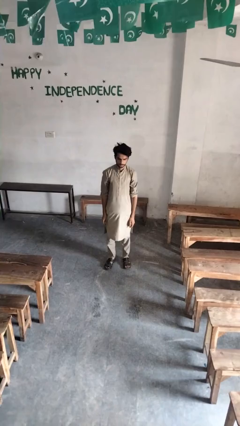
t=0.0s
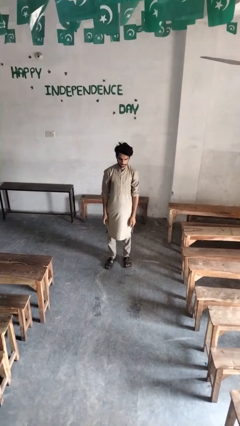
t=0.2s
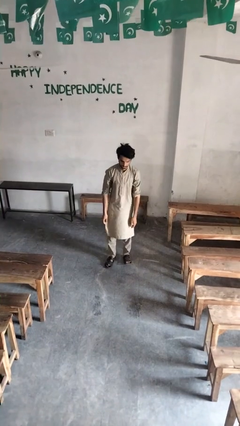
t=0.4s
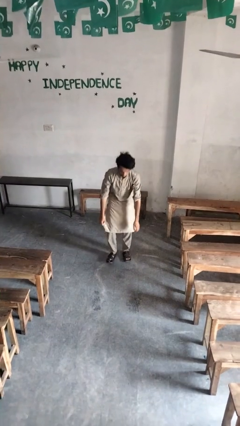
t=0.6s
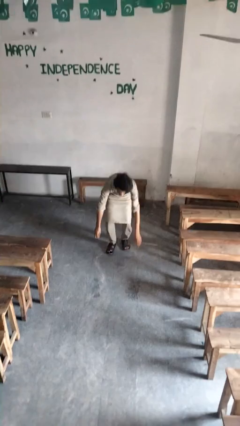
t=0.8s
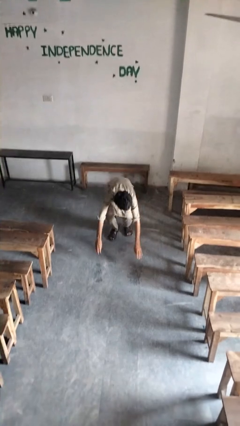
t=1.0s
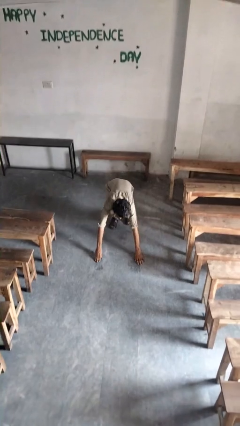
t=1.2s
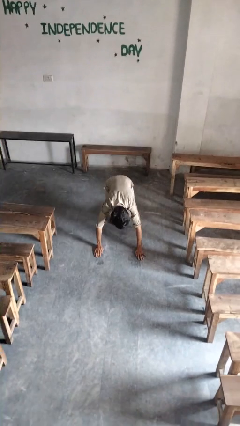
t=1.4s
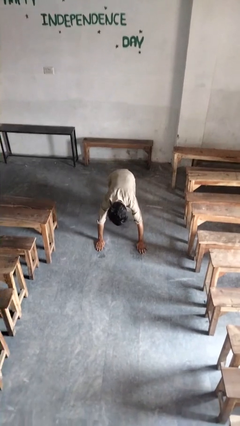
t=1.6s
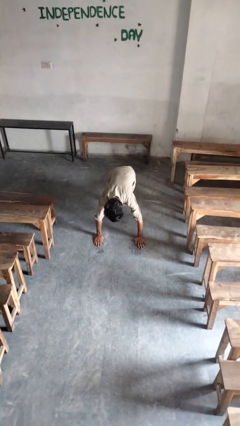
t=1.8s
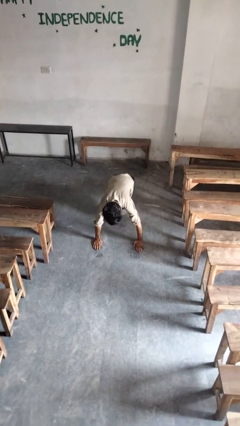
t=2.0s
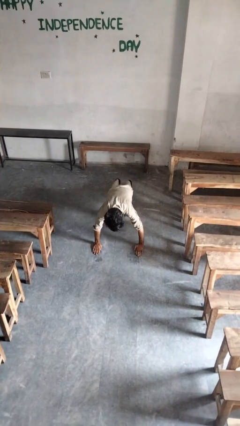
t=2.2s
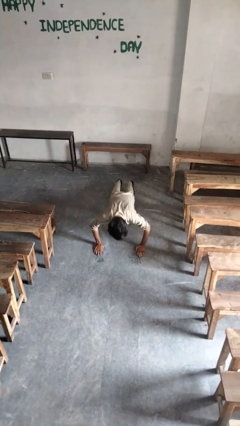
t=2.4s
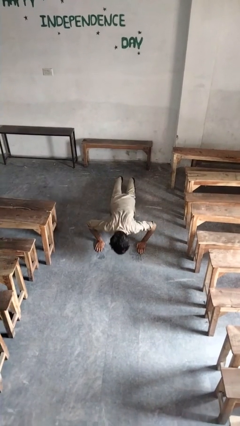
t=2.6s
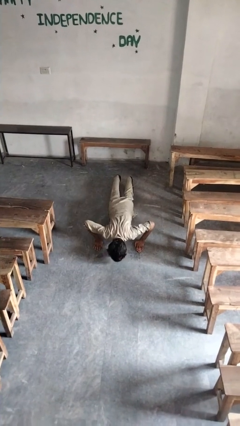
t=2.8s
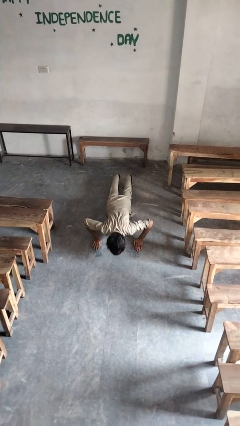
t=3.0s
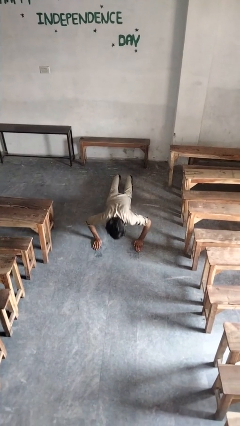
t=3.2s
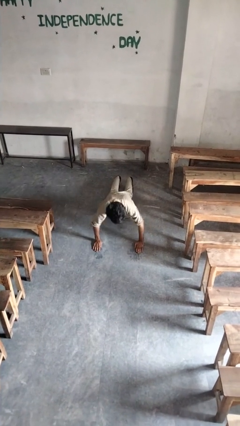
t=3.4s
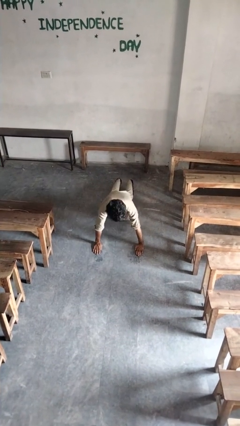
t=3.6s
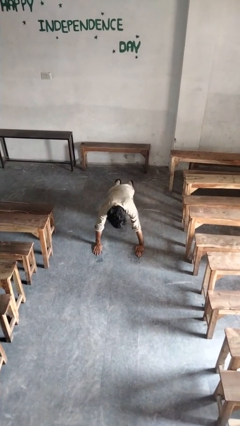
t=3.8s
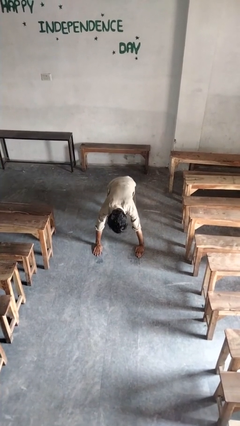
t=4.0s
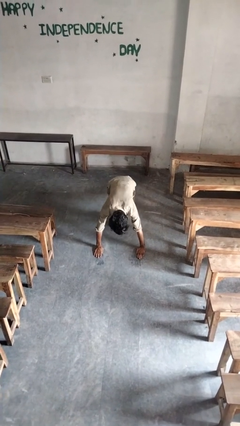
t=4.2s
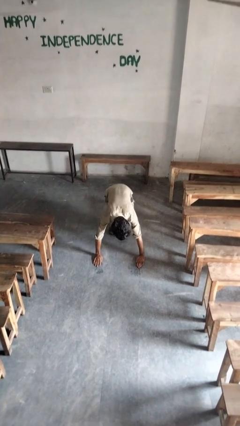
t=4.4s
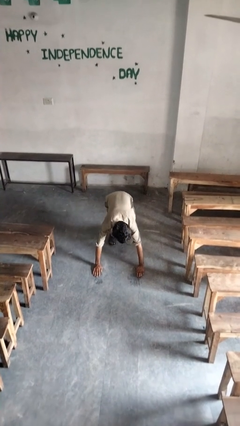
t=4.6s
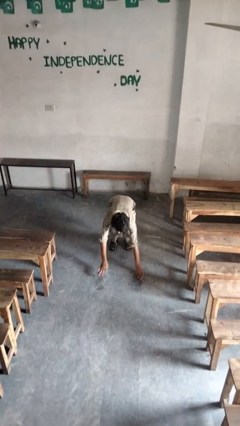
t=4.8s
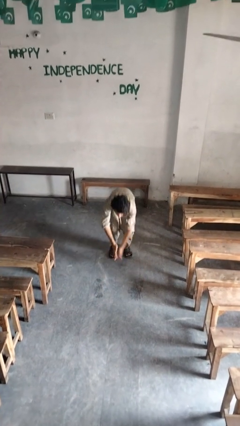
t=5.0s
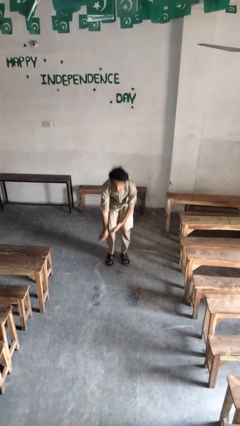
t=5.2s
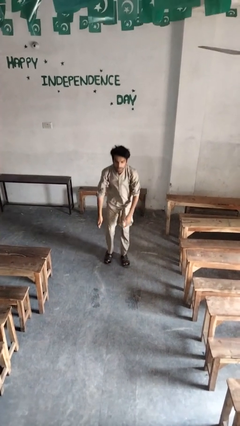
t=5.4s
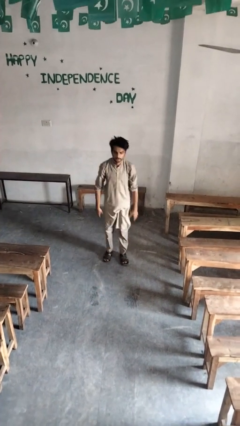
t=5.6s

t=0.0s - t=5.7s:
person exercises with pushup

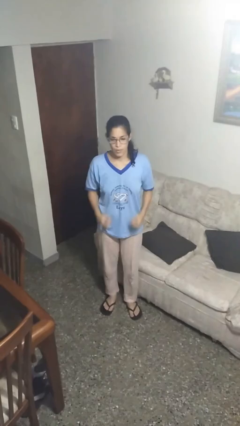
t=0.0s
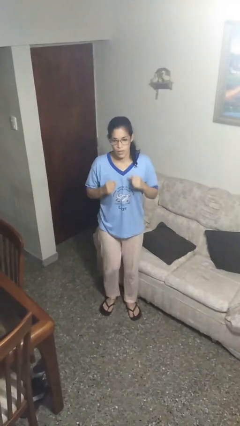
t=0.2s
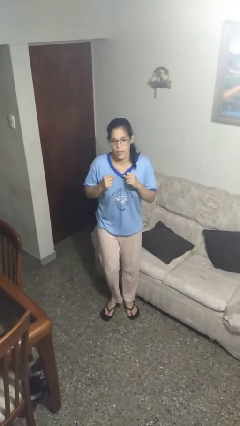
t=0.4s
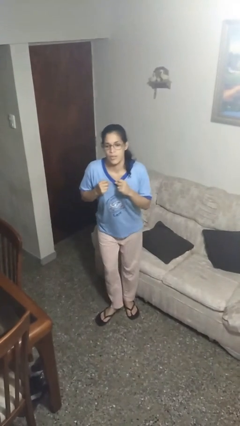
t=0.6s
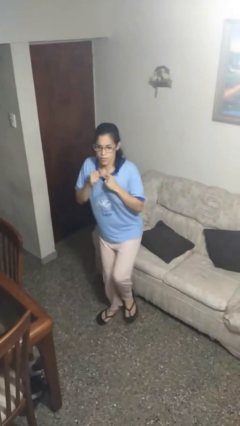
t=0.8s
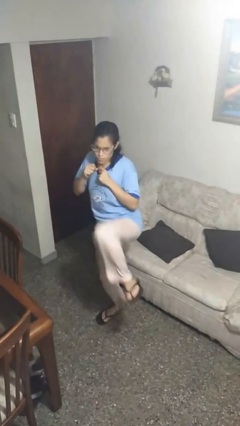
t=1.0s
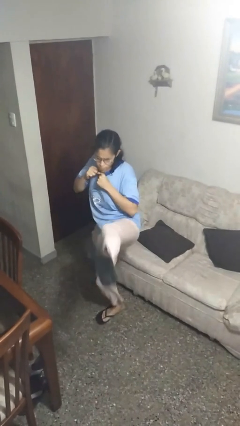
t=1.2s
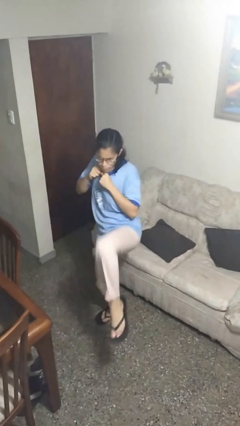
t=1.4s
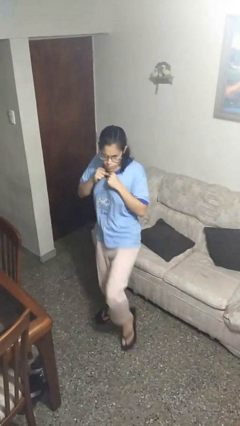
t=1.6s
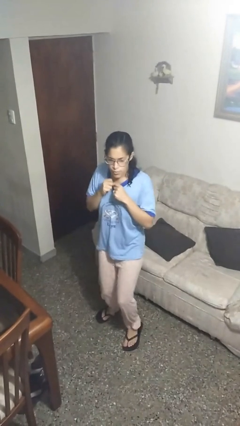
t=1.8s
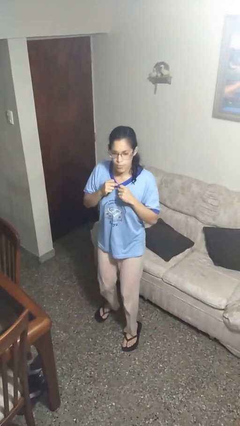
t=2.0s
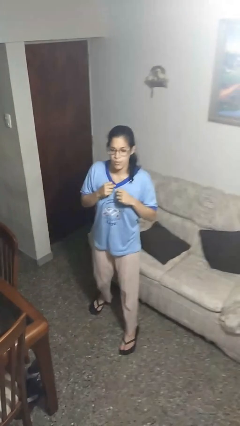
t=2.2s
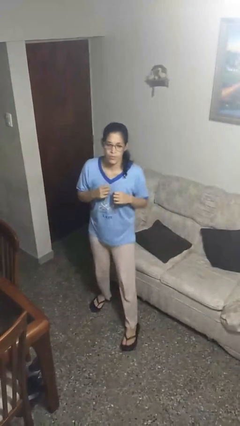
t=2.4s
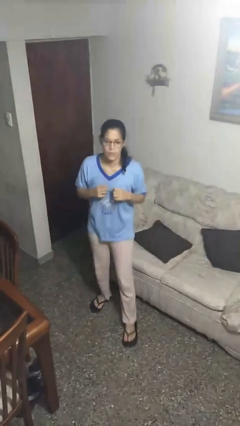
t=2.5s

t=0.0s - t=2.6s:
person karate kicks

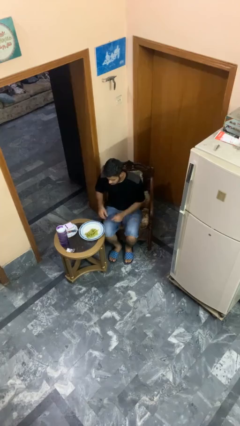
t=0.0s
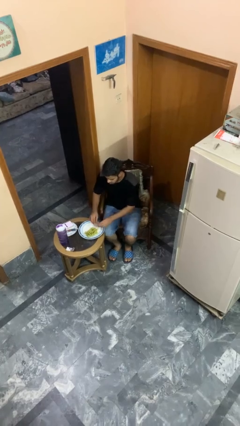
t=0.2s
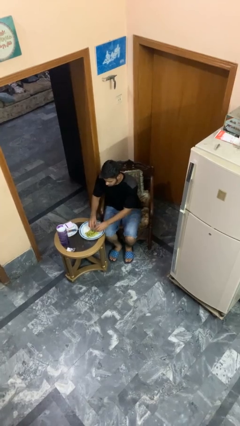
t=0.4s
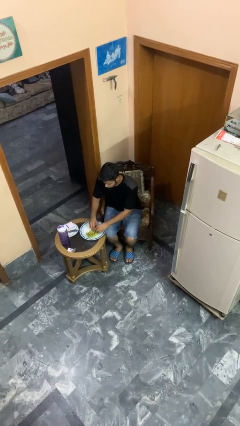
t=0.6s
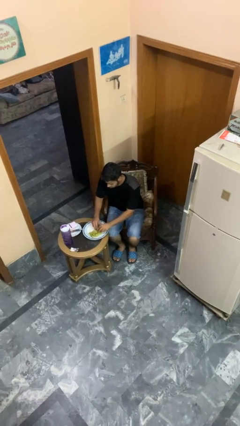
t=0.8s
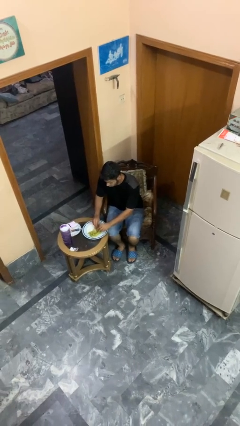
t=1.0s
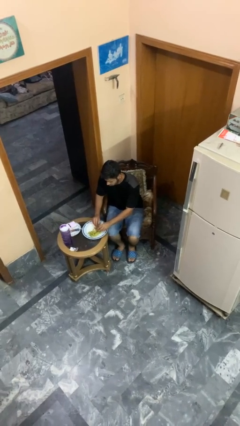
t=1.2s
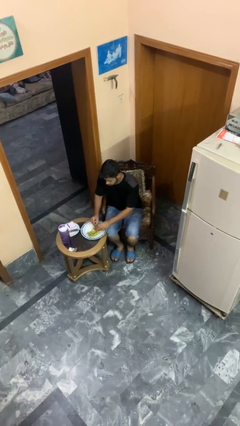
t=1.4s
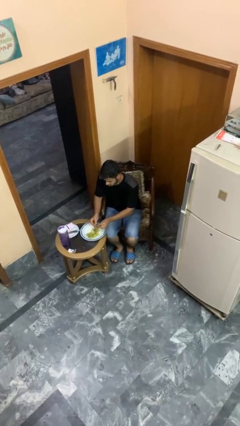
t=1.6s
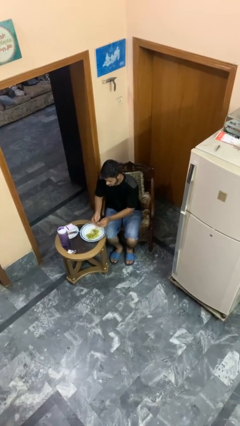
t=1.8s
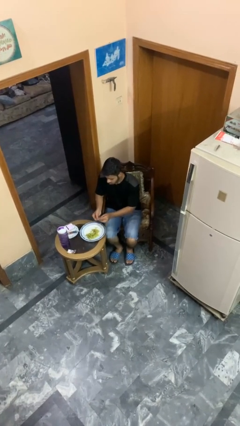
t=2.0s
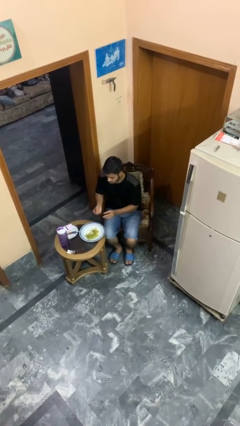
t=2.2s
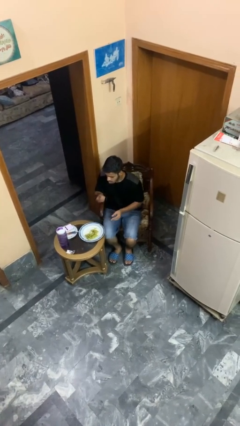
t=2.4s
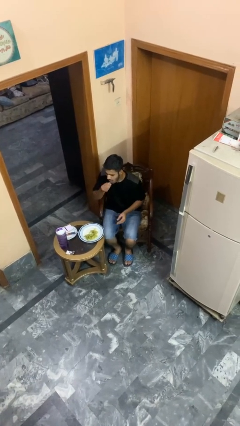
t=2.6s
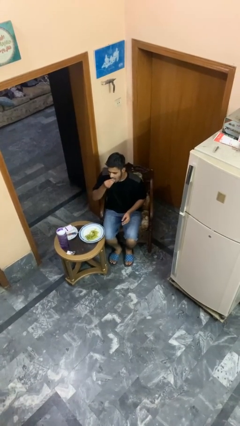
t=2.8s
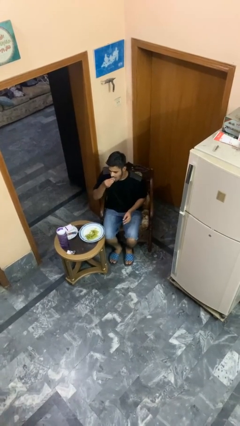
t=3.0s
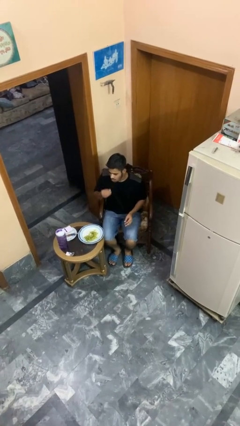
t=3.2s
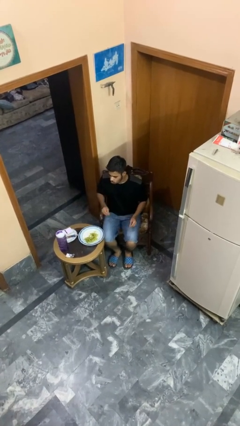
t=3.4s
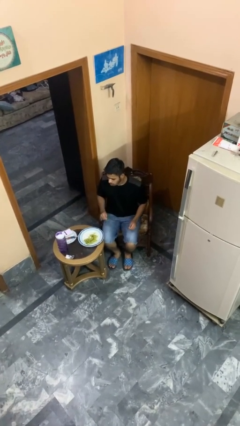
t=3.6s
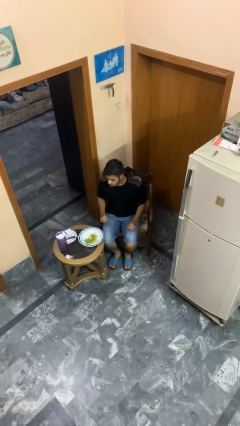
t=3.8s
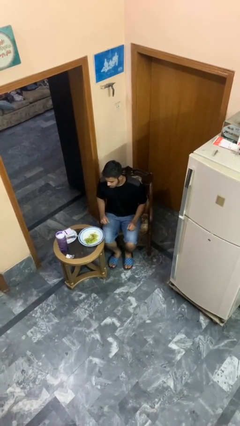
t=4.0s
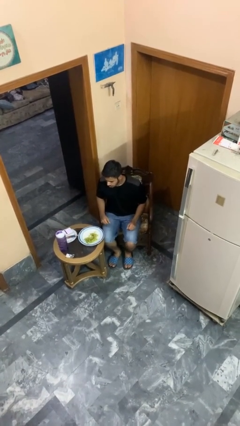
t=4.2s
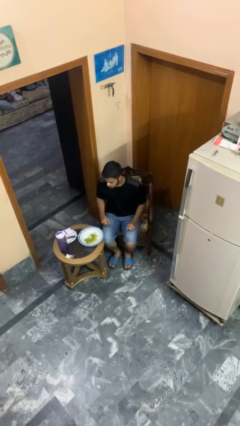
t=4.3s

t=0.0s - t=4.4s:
person eats with hands

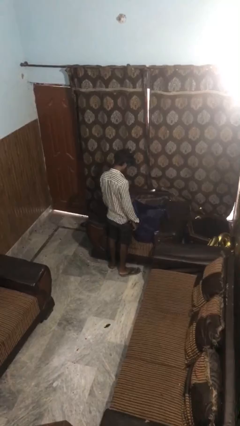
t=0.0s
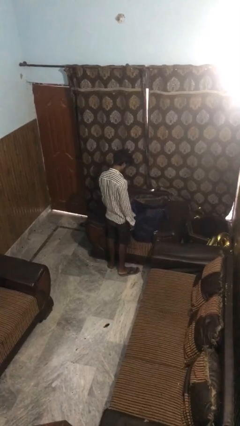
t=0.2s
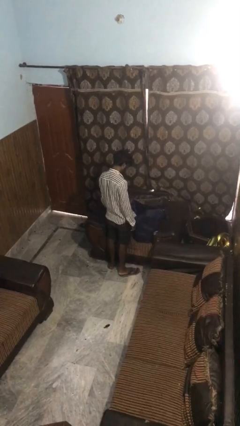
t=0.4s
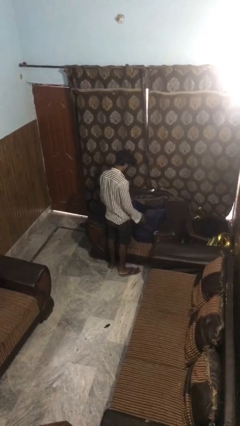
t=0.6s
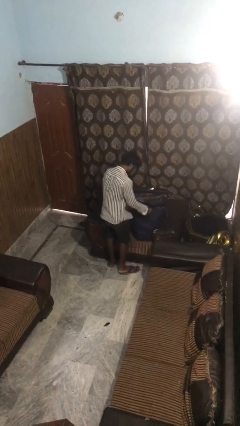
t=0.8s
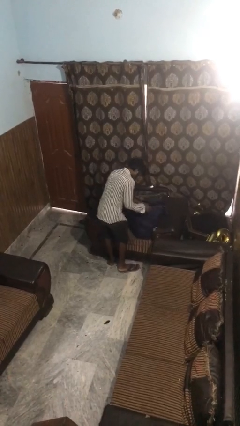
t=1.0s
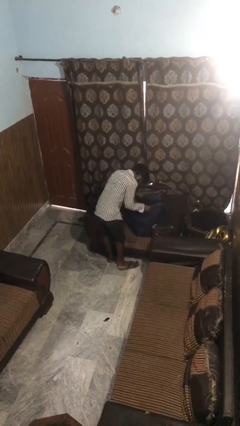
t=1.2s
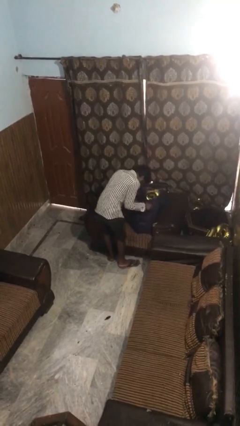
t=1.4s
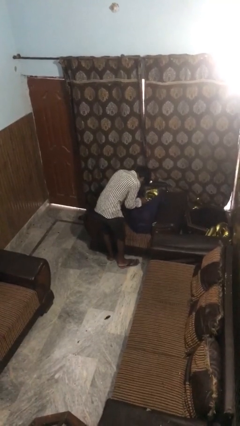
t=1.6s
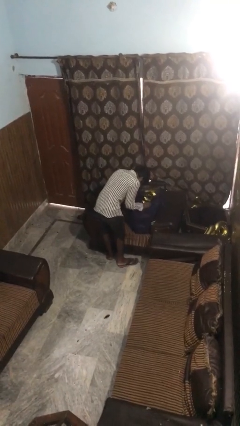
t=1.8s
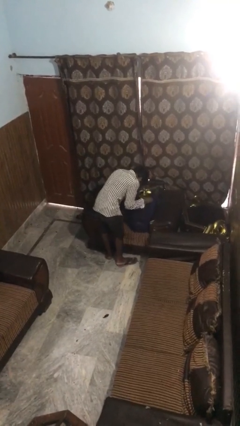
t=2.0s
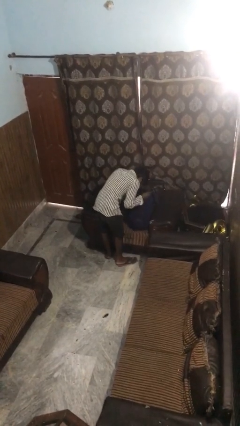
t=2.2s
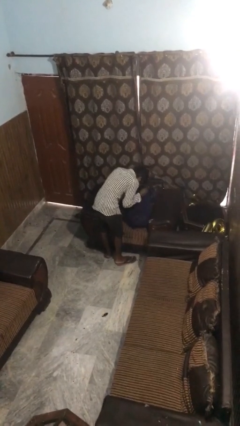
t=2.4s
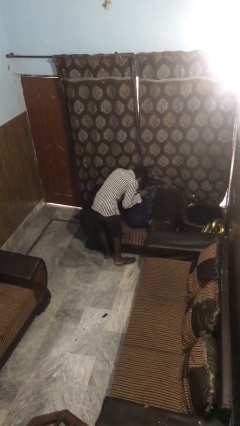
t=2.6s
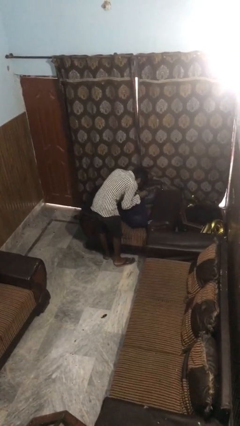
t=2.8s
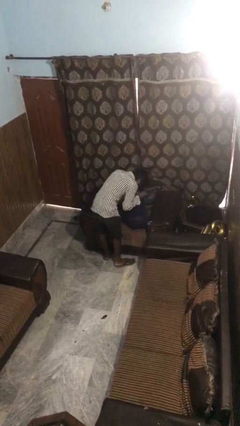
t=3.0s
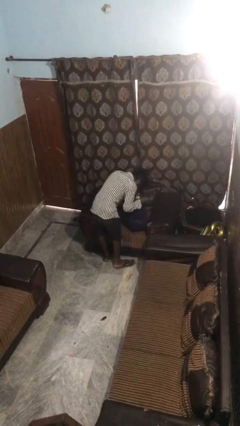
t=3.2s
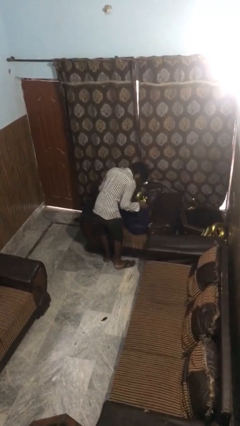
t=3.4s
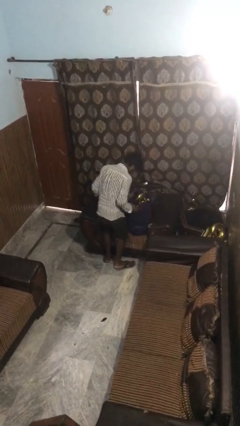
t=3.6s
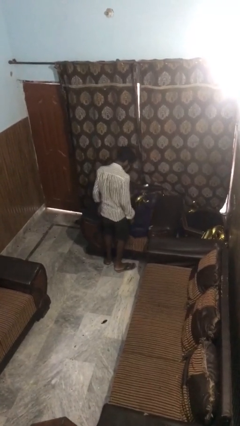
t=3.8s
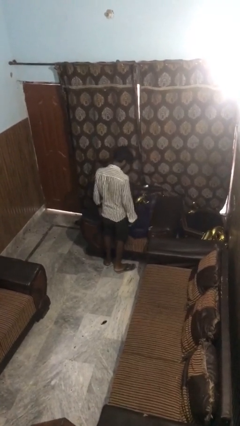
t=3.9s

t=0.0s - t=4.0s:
person searches in bag

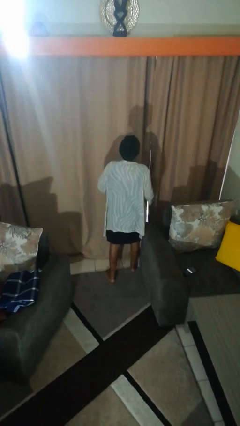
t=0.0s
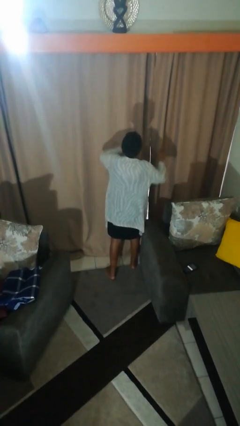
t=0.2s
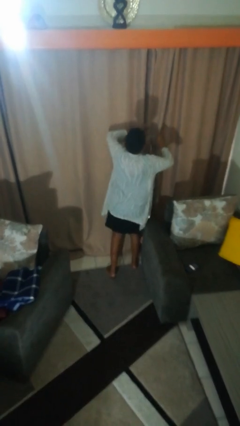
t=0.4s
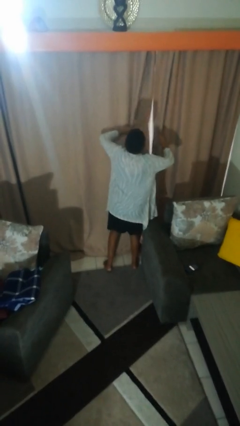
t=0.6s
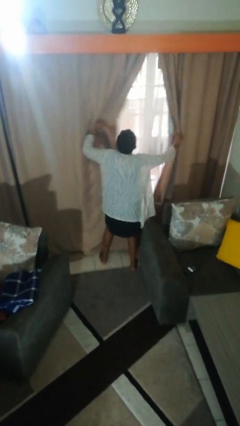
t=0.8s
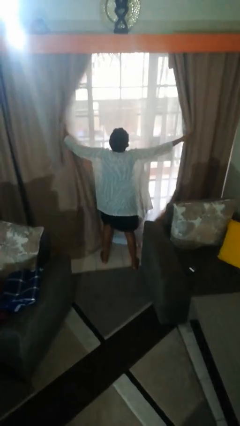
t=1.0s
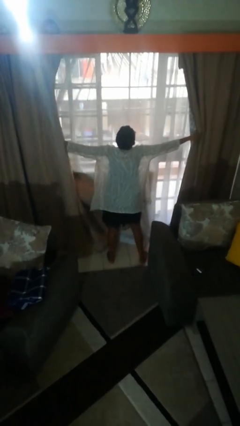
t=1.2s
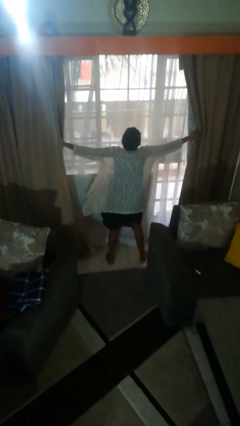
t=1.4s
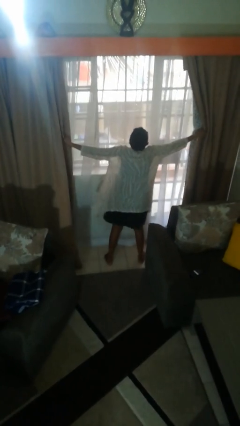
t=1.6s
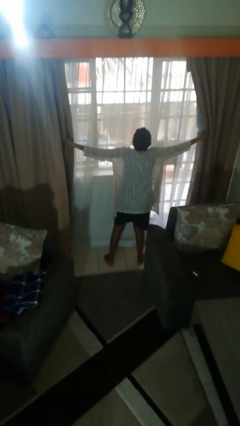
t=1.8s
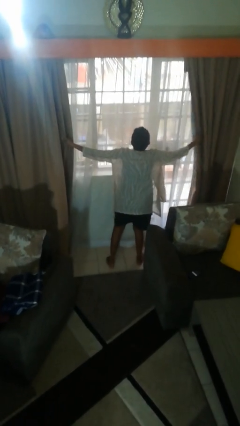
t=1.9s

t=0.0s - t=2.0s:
person opens curtains
